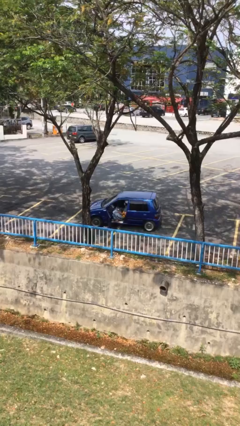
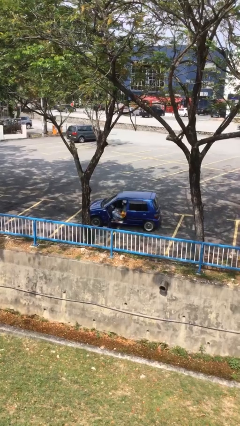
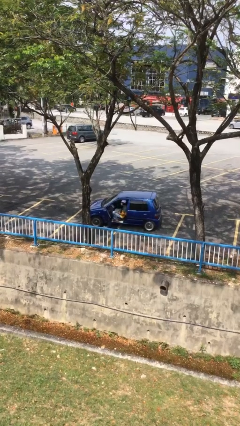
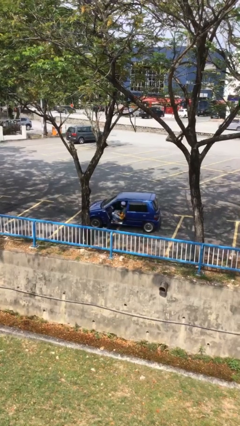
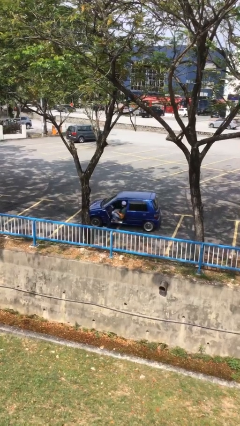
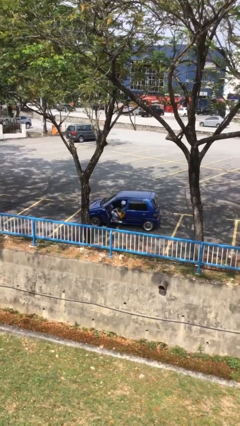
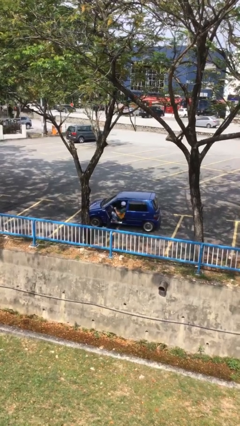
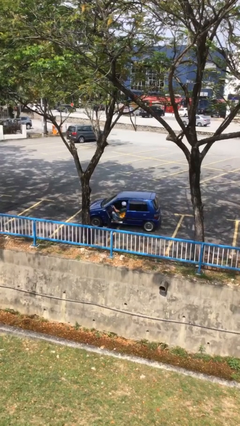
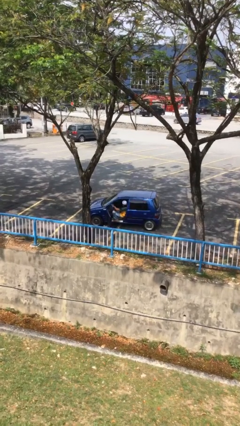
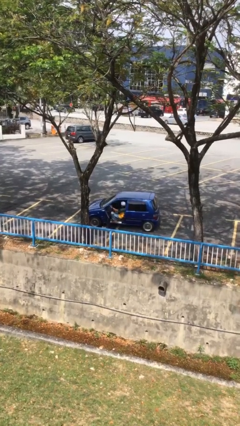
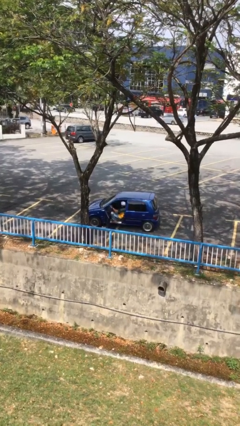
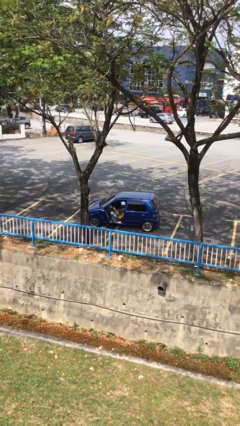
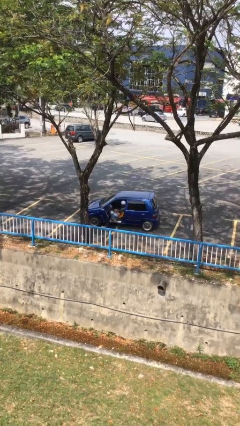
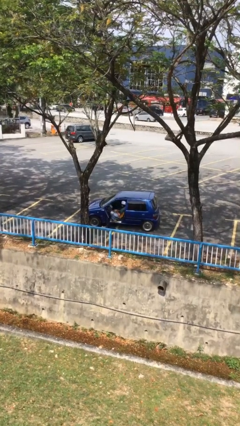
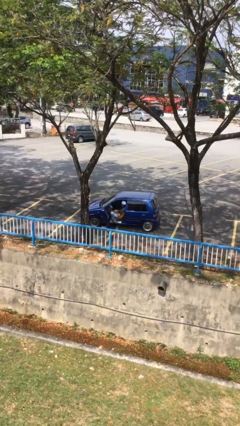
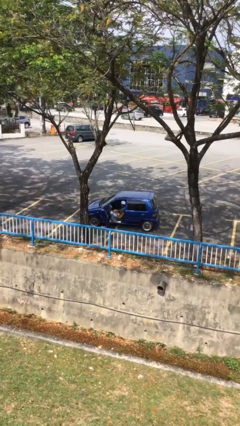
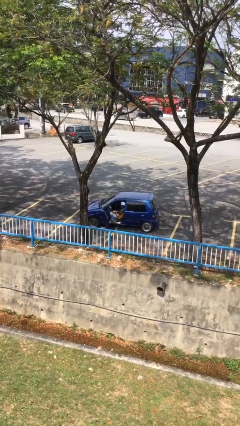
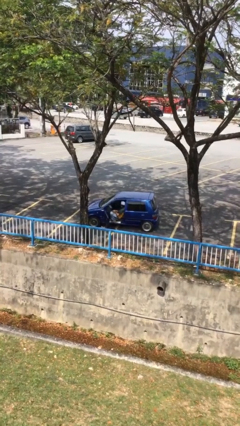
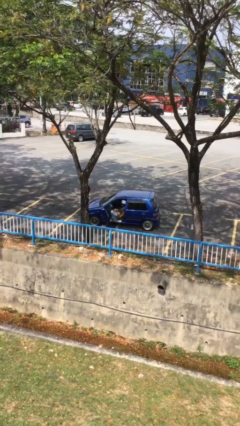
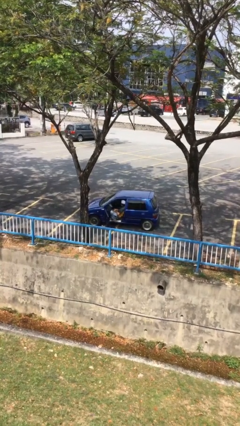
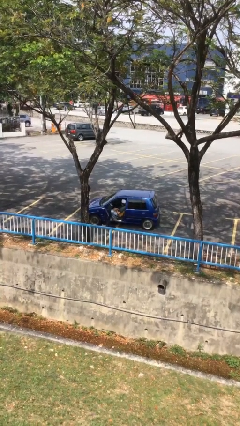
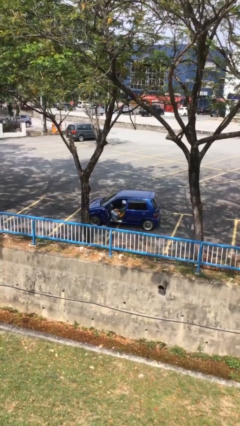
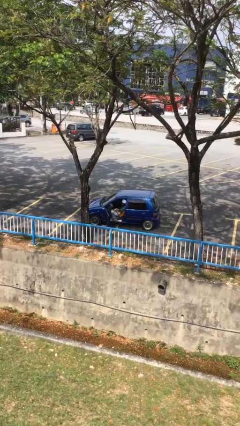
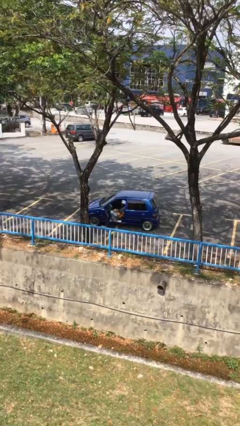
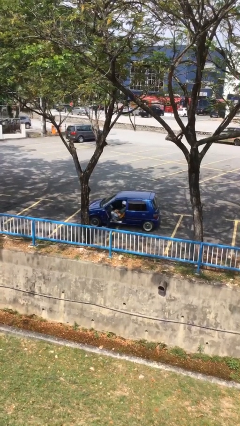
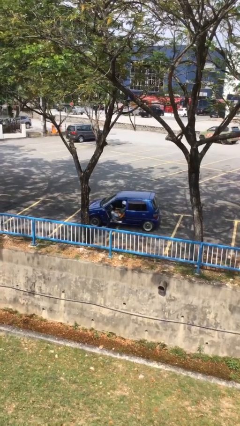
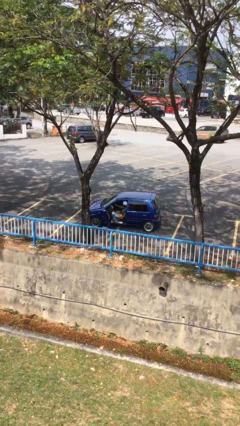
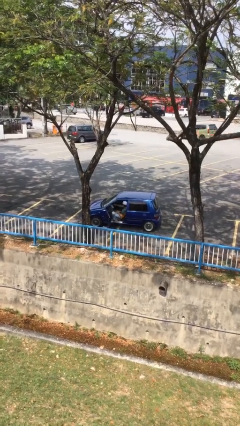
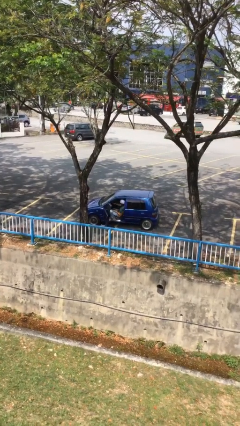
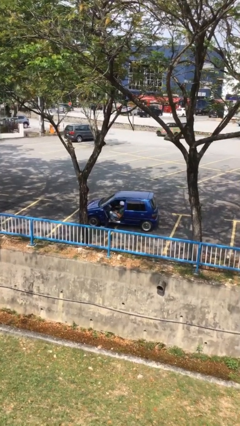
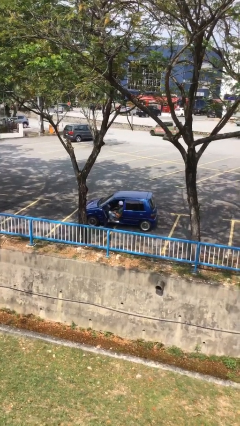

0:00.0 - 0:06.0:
person interacts with laptop

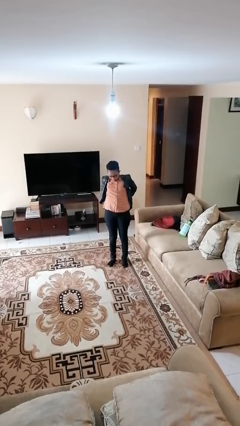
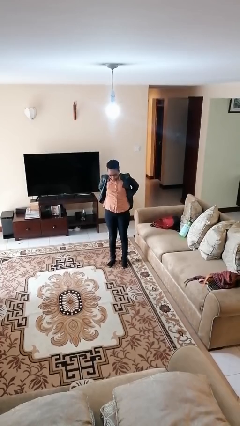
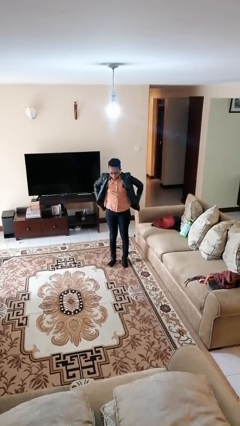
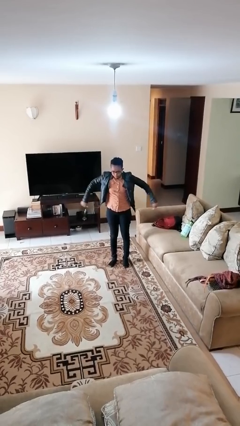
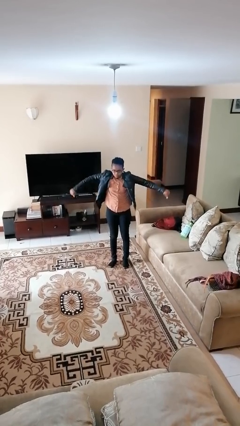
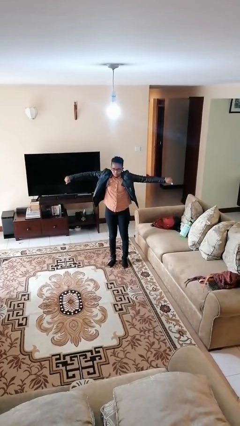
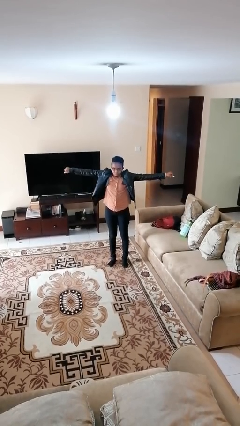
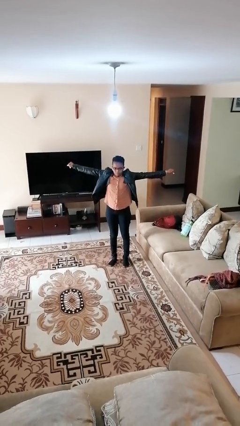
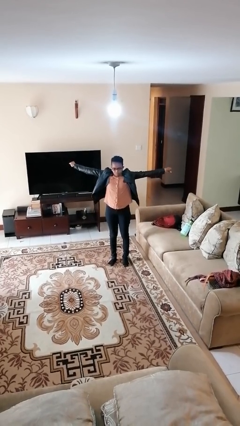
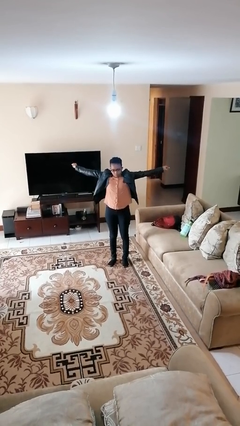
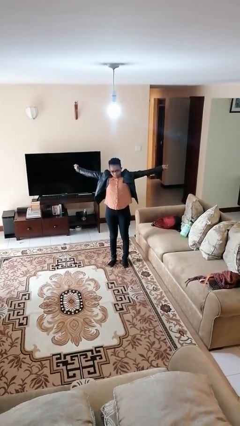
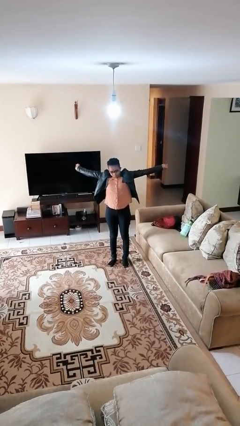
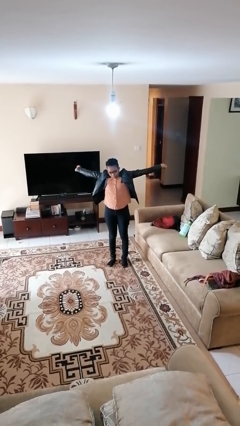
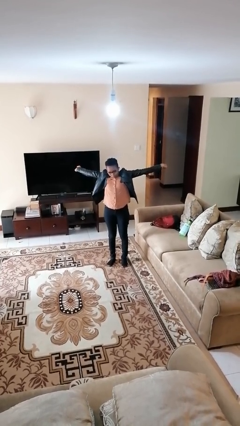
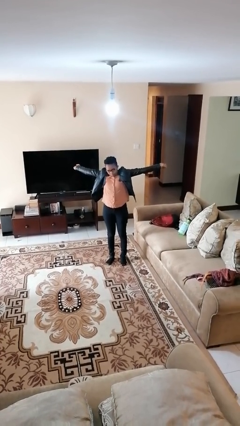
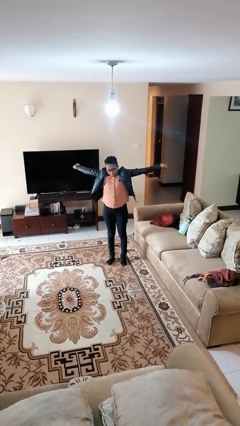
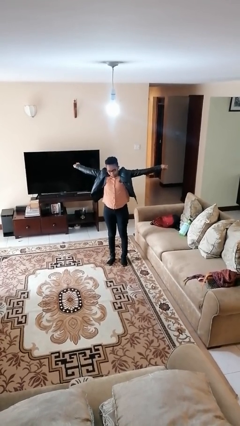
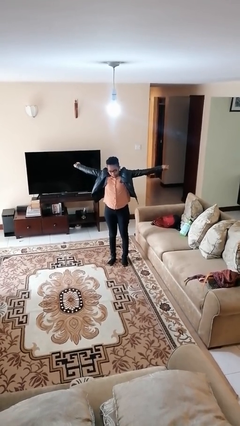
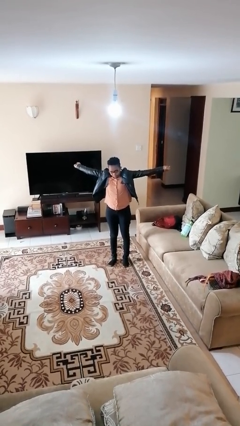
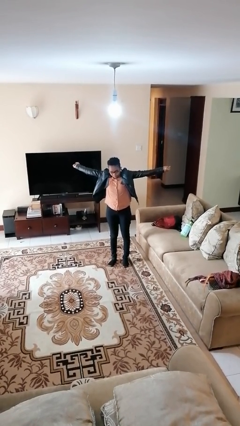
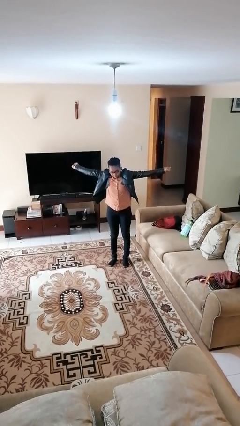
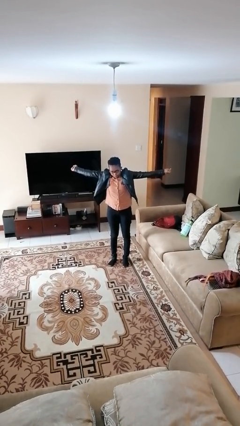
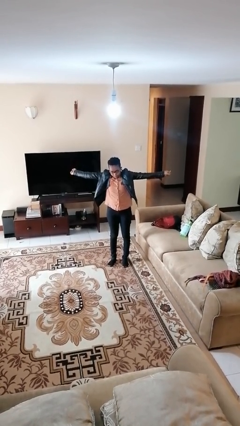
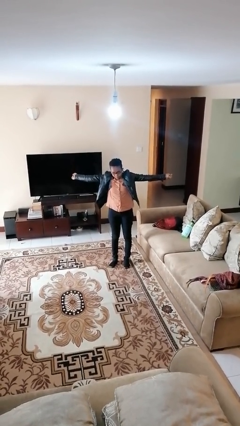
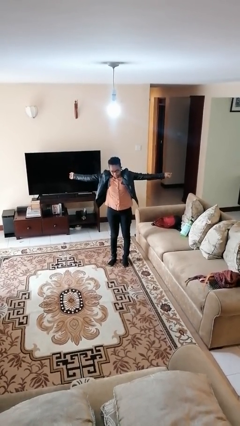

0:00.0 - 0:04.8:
person stretches arms to side

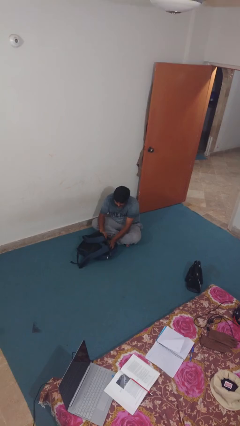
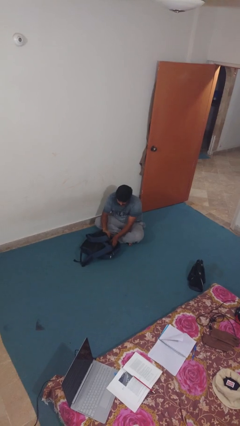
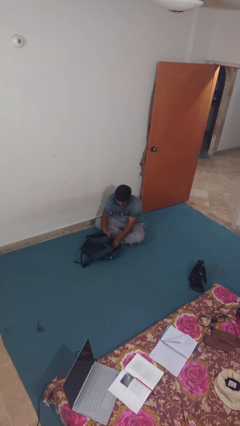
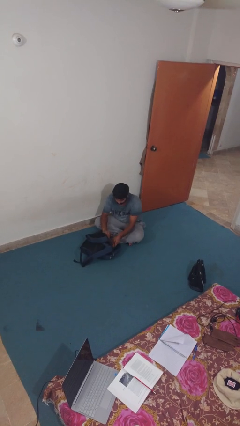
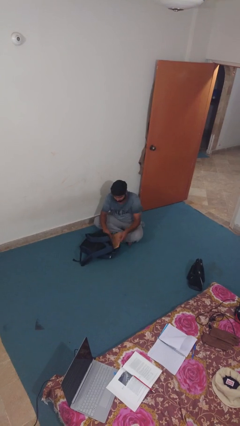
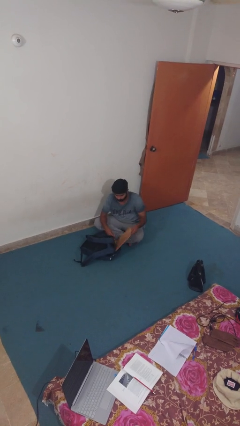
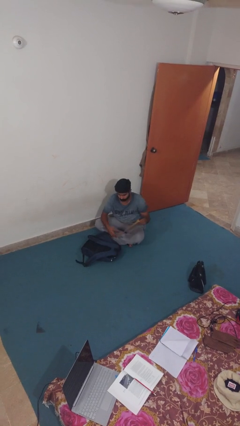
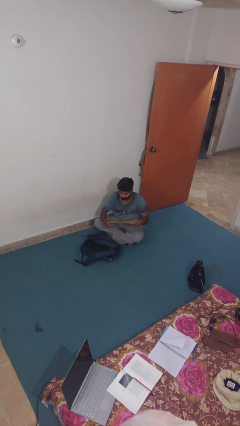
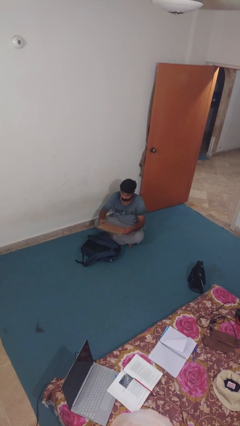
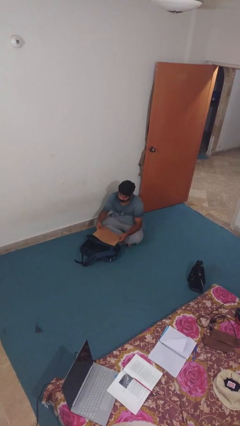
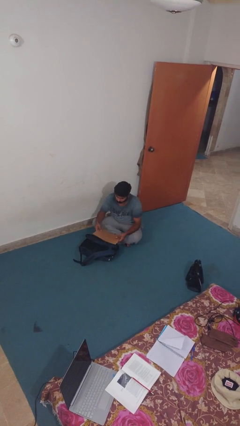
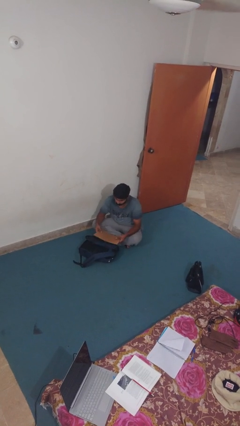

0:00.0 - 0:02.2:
person takes object from backpack

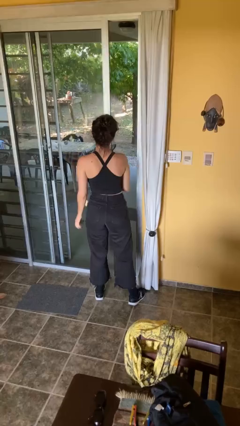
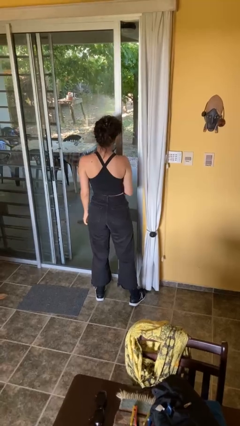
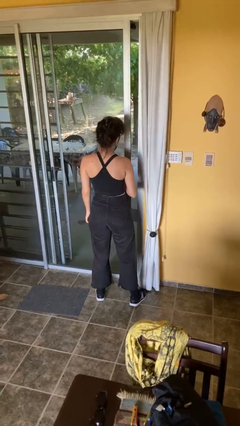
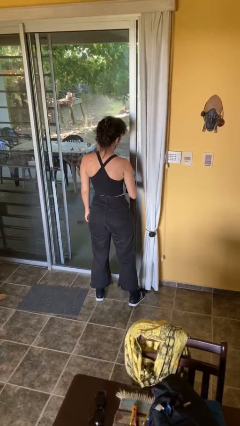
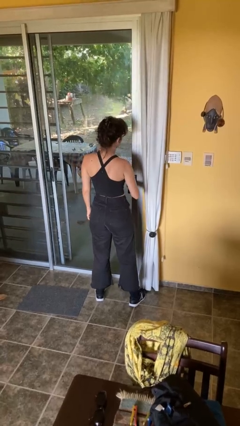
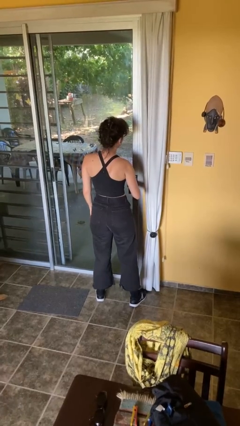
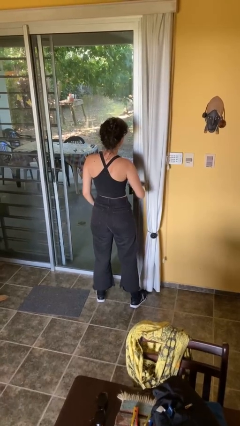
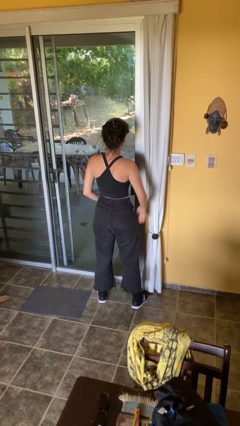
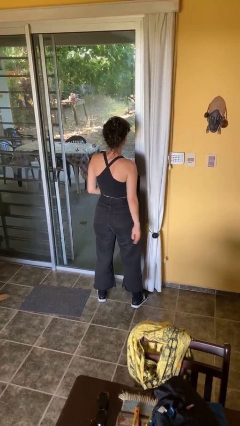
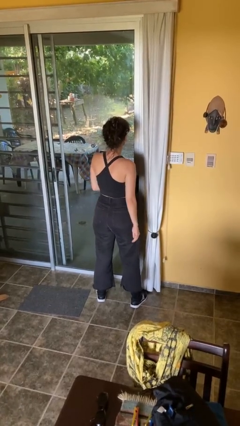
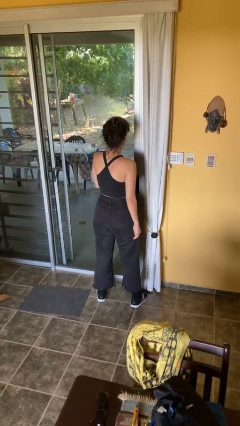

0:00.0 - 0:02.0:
person closes facility door

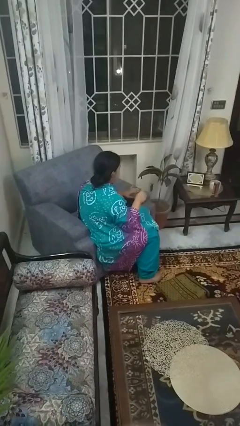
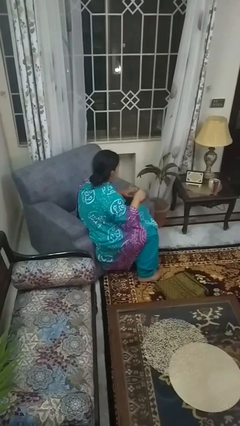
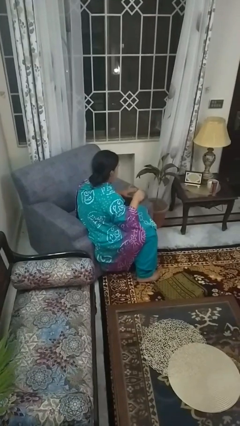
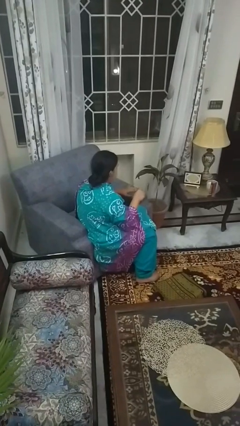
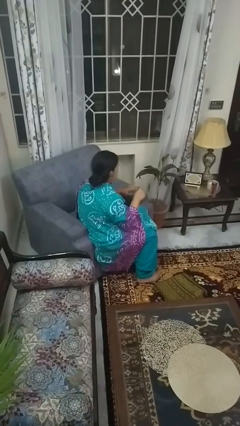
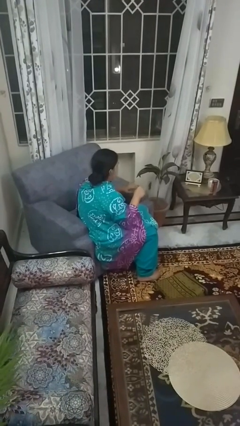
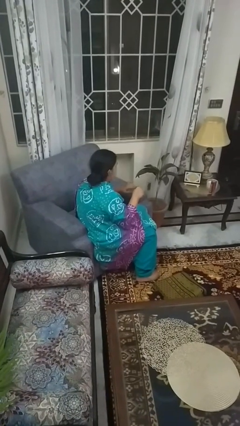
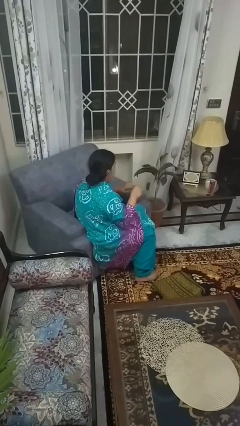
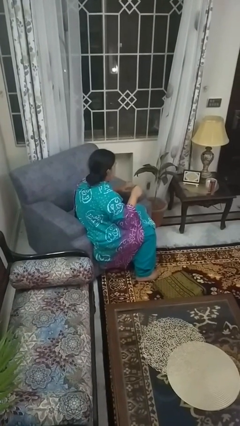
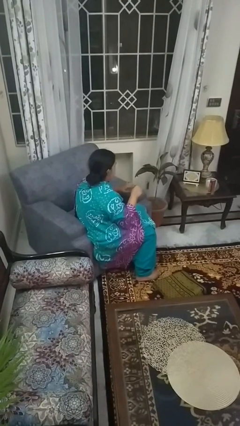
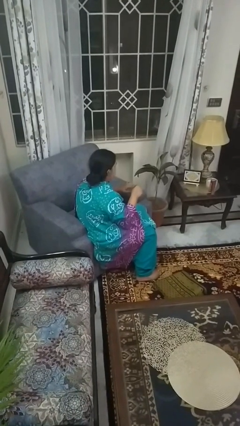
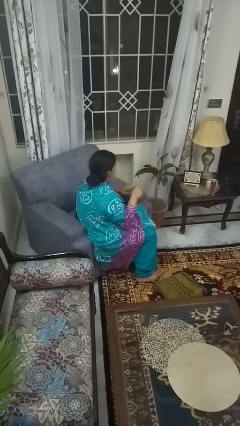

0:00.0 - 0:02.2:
person files fingernails

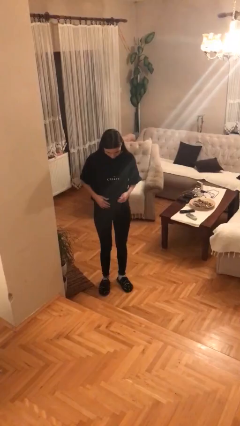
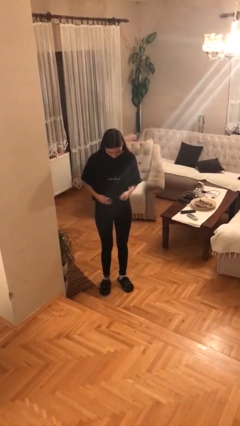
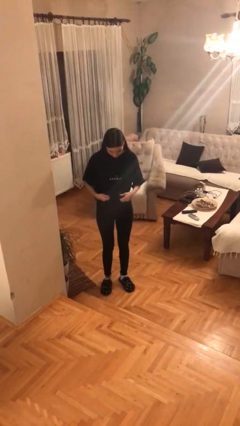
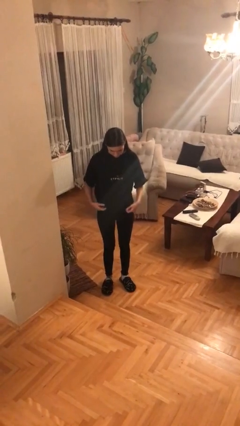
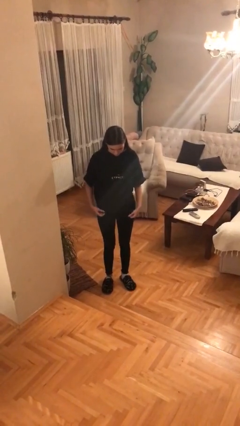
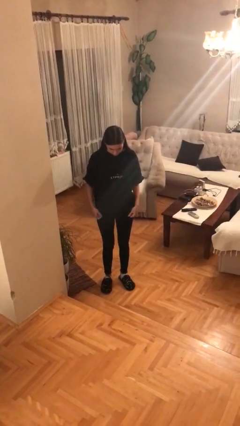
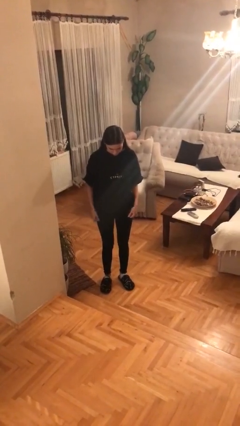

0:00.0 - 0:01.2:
person untucks shirt
